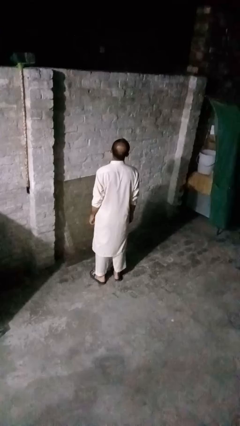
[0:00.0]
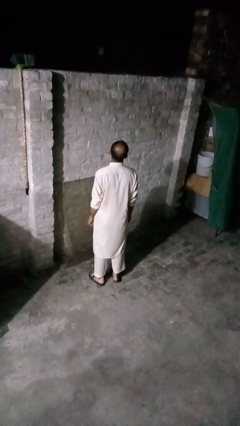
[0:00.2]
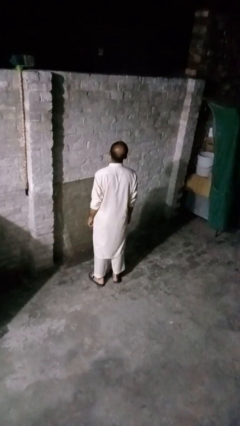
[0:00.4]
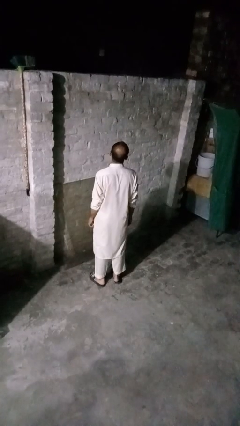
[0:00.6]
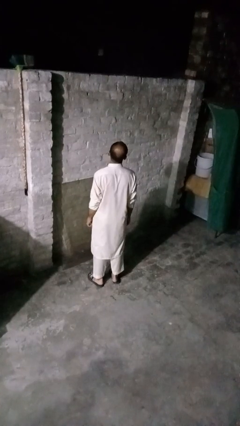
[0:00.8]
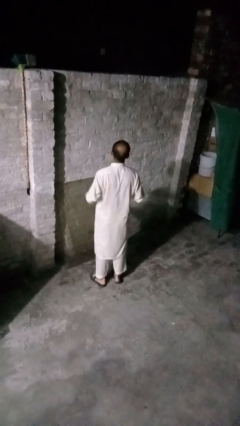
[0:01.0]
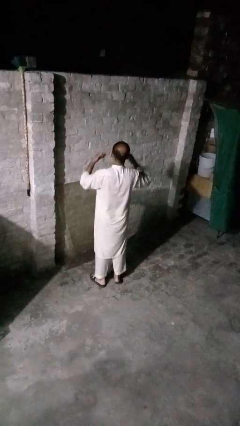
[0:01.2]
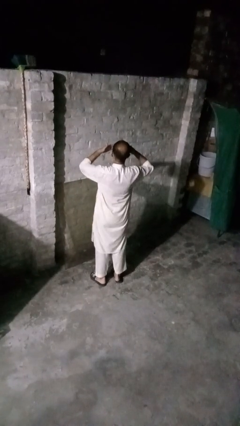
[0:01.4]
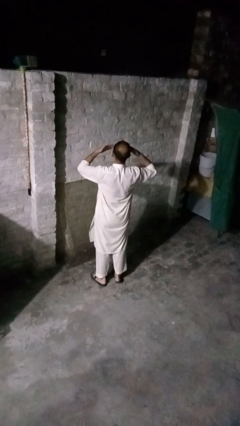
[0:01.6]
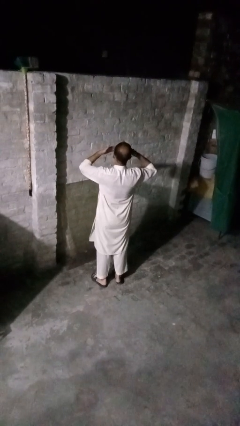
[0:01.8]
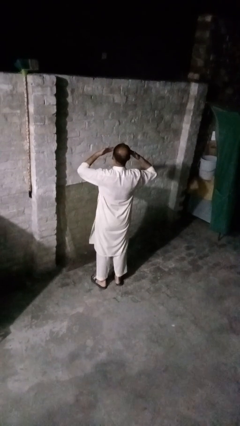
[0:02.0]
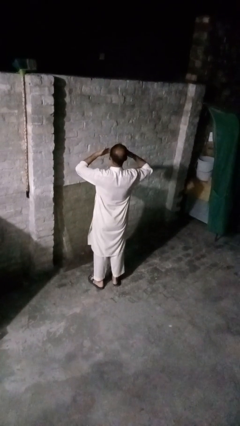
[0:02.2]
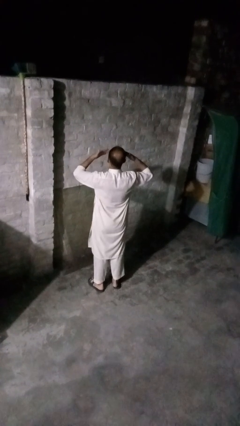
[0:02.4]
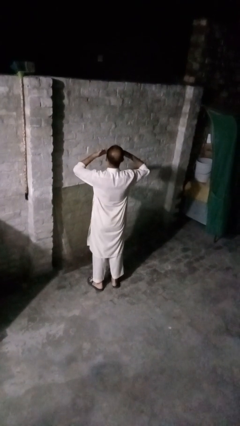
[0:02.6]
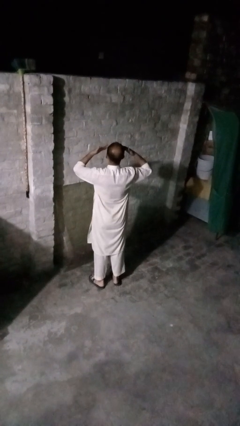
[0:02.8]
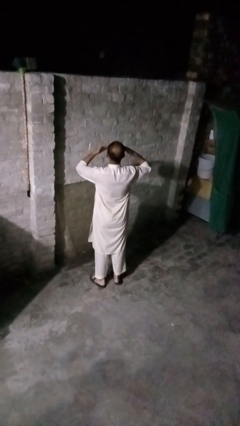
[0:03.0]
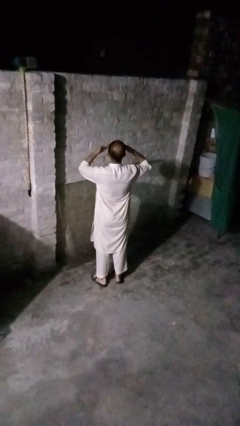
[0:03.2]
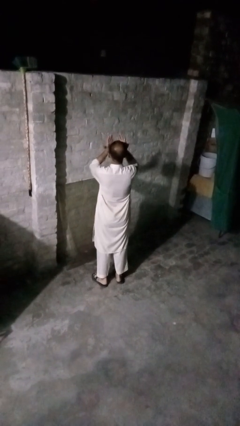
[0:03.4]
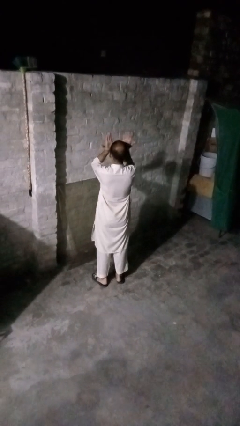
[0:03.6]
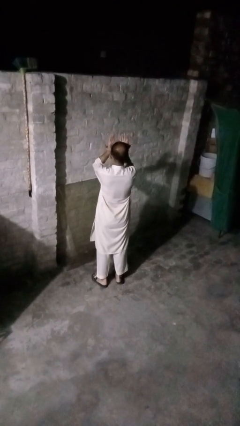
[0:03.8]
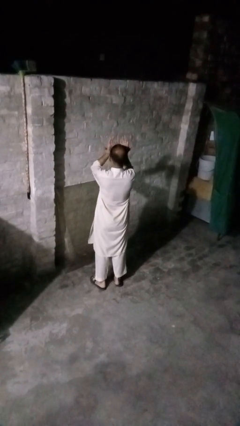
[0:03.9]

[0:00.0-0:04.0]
person rubs eyes

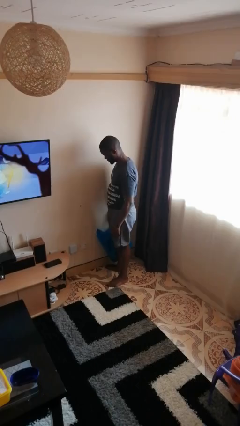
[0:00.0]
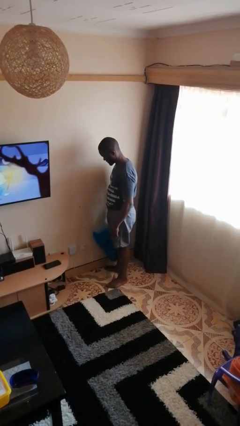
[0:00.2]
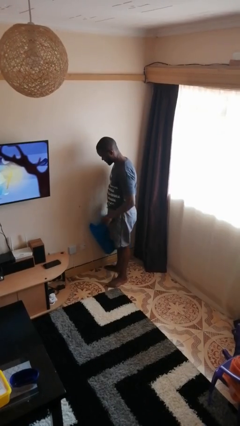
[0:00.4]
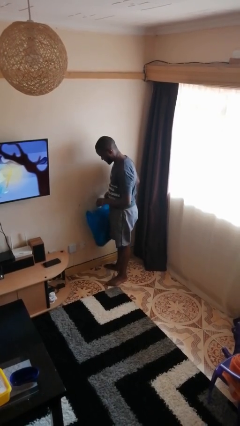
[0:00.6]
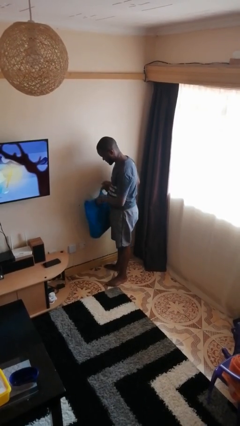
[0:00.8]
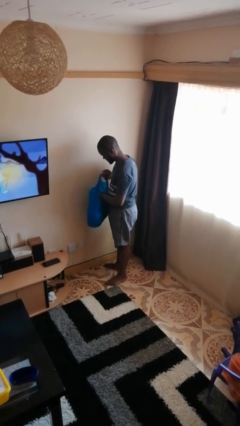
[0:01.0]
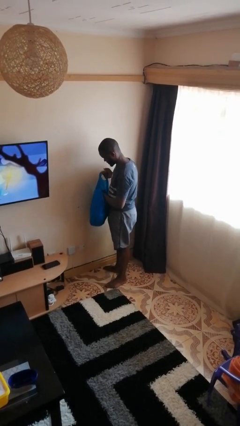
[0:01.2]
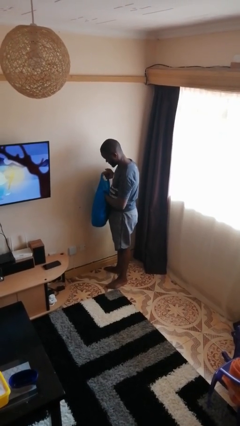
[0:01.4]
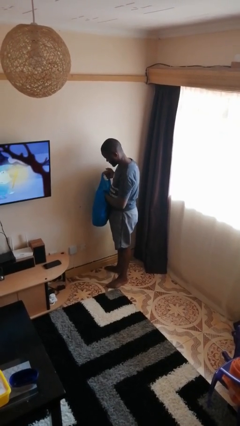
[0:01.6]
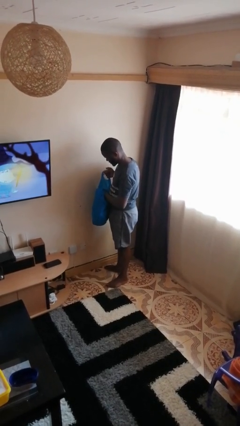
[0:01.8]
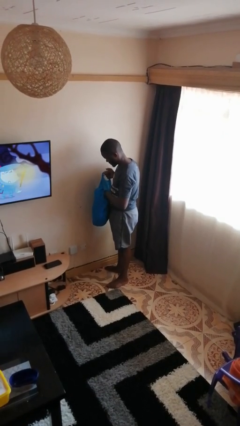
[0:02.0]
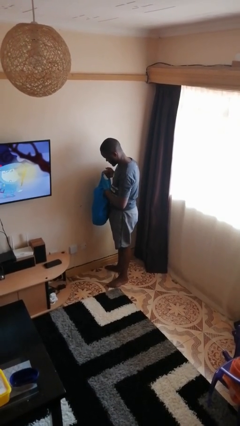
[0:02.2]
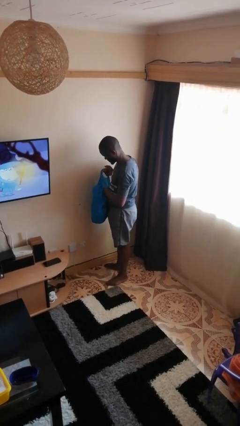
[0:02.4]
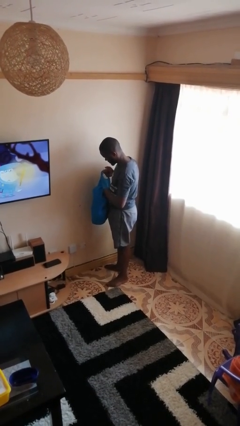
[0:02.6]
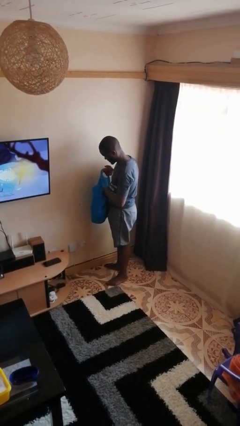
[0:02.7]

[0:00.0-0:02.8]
person searches in bag

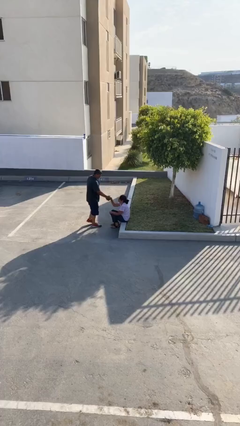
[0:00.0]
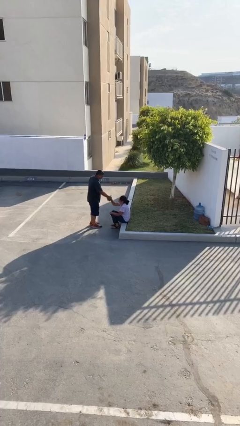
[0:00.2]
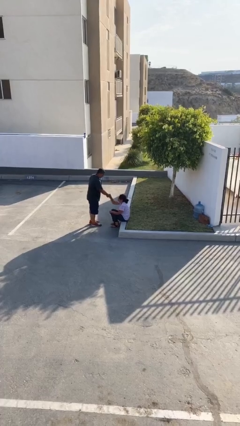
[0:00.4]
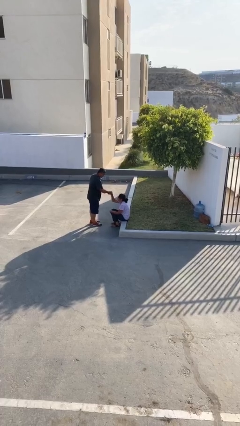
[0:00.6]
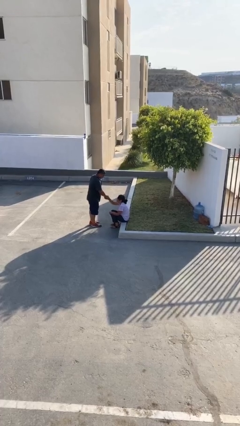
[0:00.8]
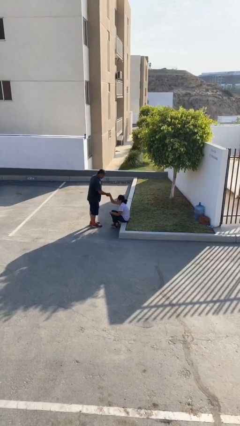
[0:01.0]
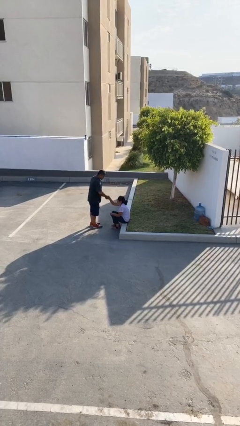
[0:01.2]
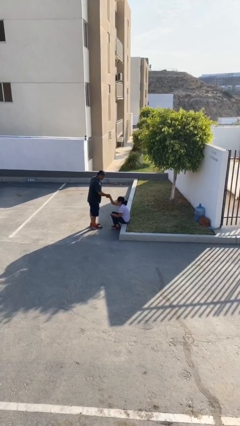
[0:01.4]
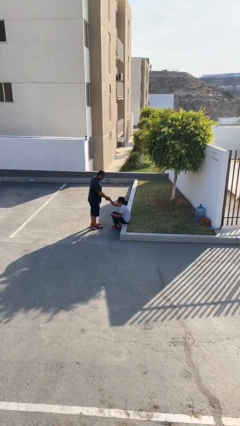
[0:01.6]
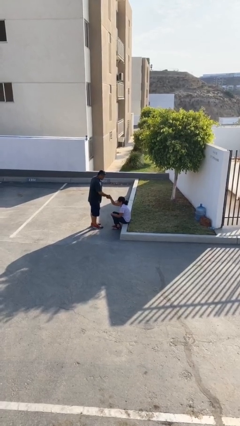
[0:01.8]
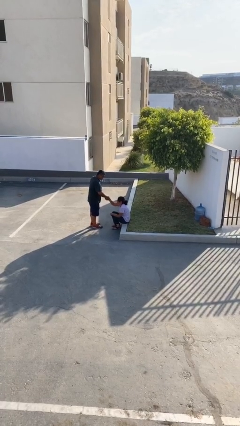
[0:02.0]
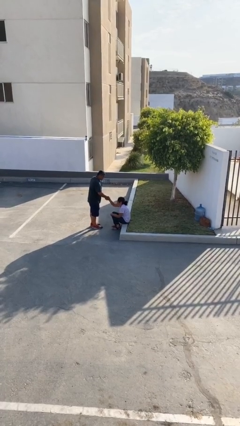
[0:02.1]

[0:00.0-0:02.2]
person shakes hand

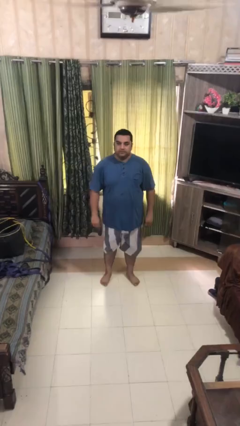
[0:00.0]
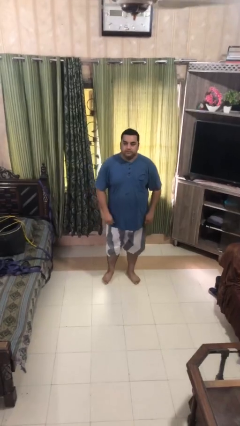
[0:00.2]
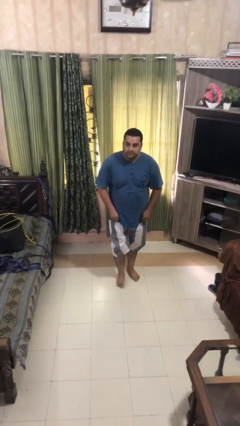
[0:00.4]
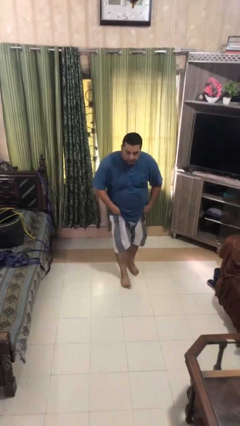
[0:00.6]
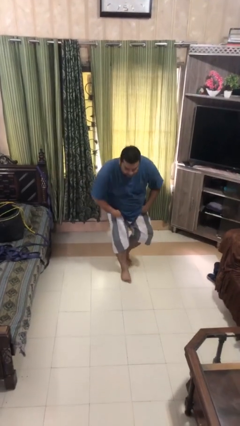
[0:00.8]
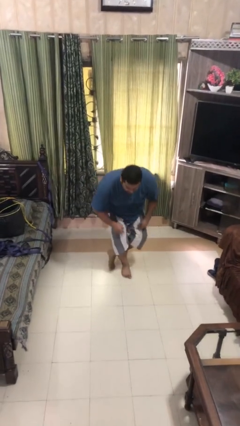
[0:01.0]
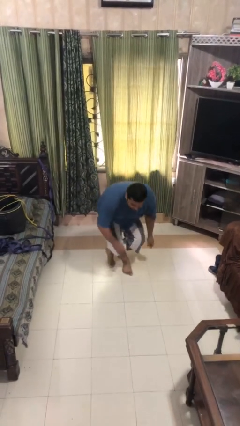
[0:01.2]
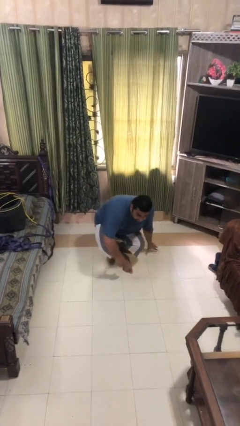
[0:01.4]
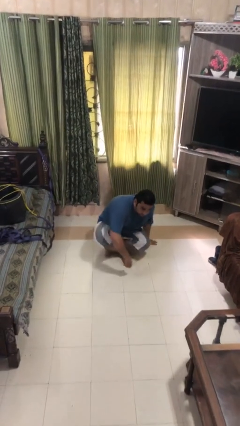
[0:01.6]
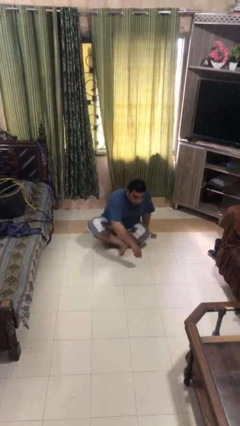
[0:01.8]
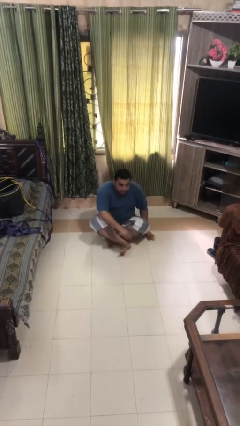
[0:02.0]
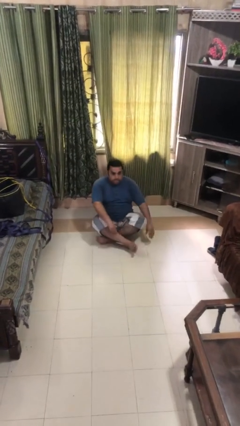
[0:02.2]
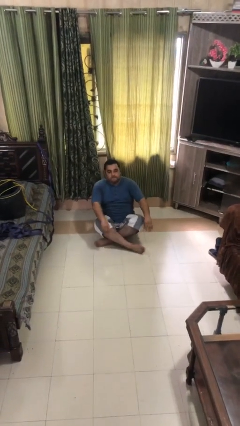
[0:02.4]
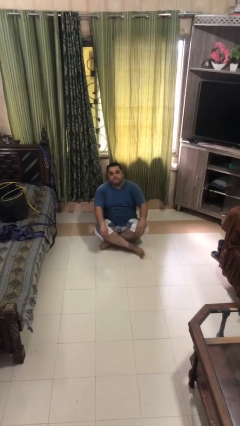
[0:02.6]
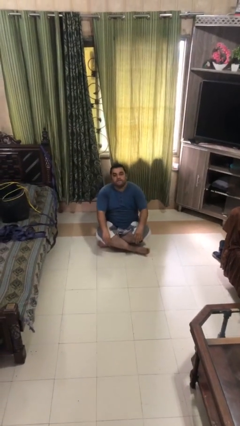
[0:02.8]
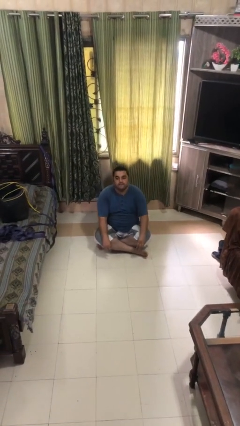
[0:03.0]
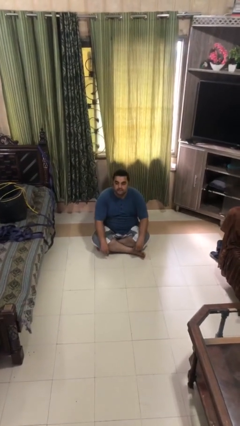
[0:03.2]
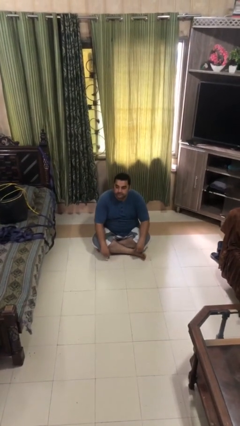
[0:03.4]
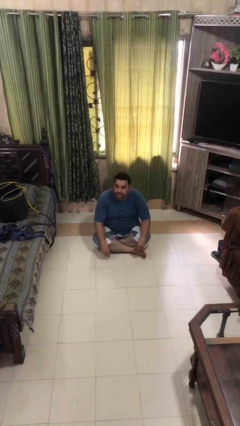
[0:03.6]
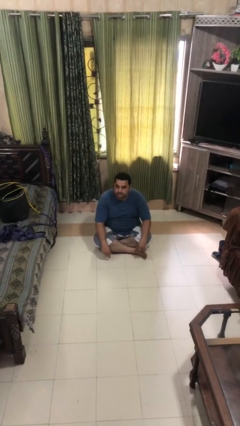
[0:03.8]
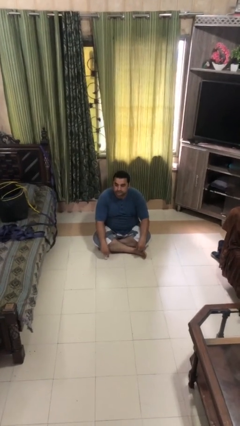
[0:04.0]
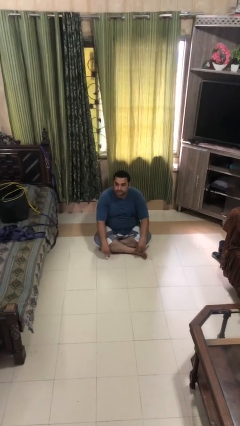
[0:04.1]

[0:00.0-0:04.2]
person sits crisscross

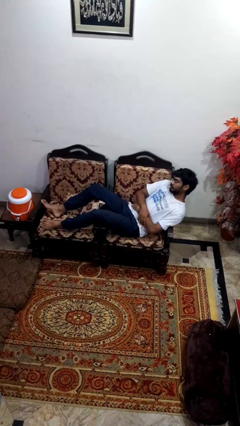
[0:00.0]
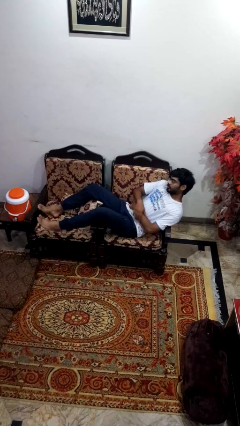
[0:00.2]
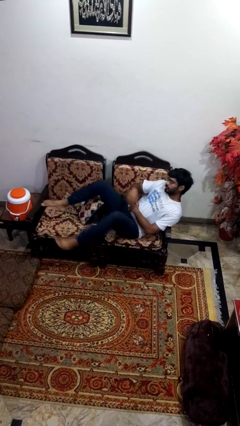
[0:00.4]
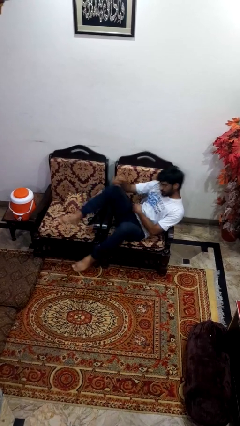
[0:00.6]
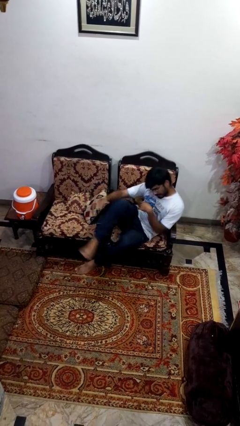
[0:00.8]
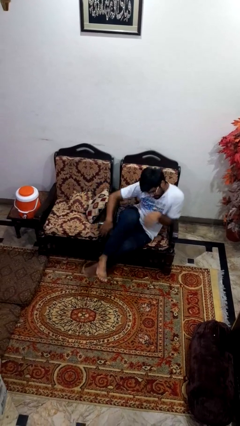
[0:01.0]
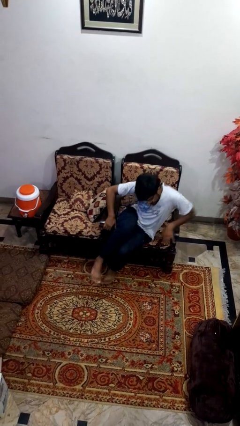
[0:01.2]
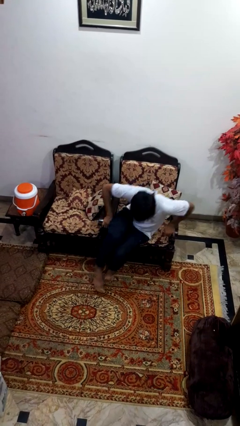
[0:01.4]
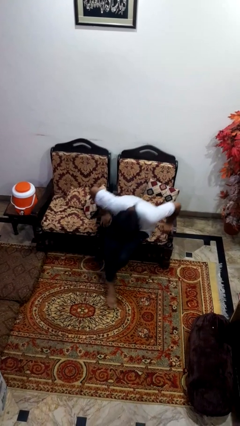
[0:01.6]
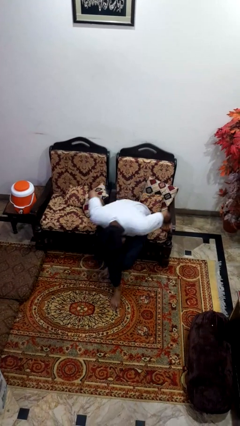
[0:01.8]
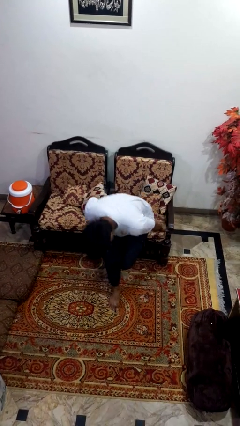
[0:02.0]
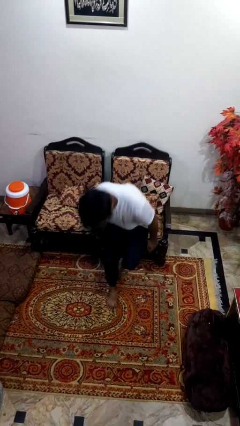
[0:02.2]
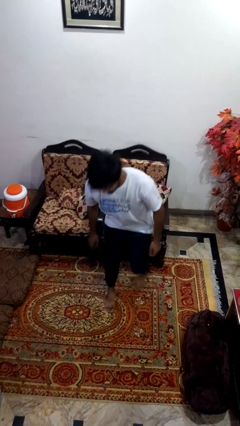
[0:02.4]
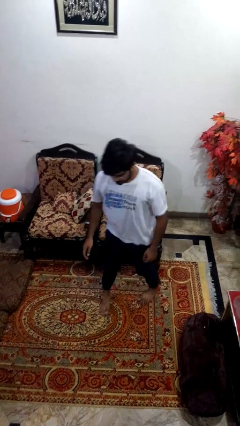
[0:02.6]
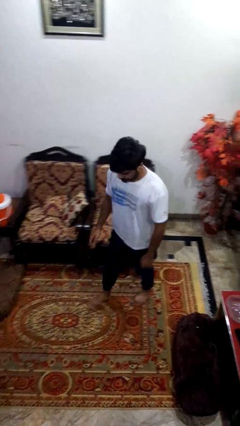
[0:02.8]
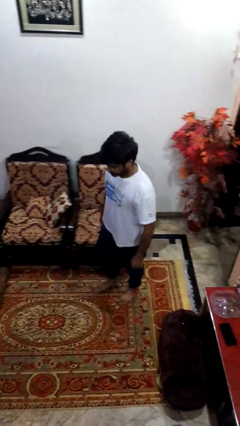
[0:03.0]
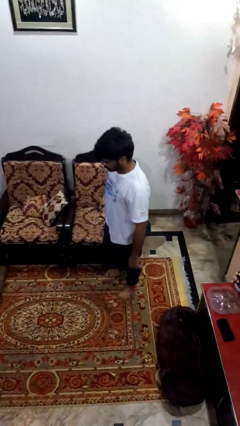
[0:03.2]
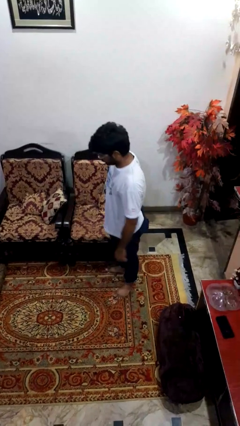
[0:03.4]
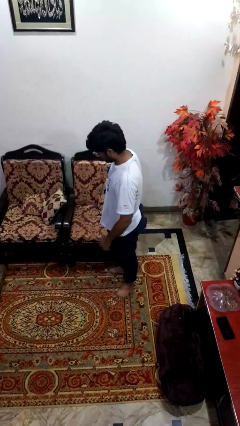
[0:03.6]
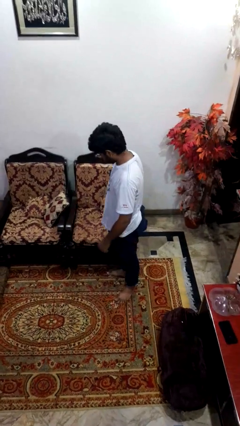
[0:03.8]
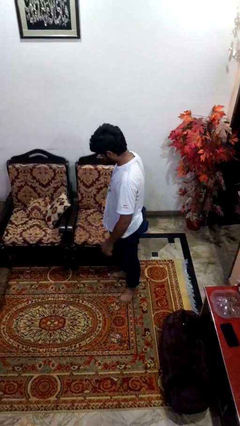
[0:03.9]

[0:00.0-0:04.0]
person stands up

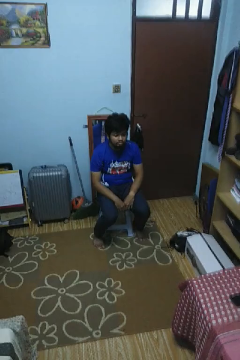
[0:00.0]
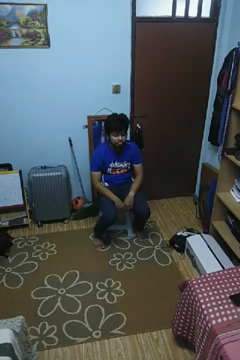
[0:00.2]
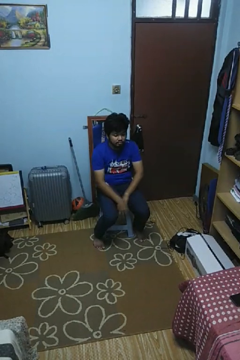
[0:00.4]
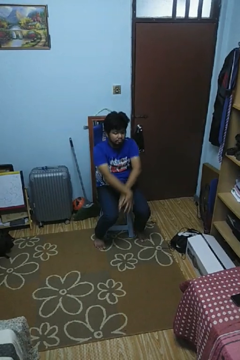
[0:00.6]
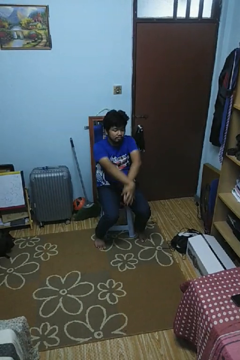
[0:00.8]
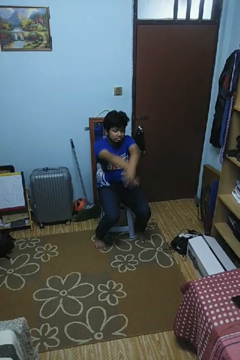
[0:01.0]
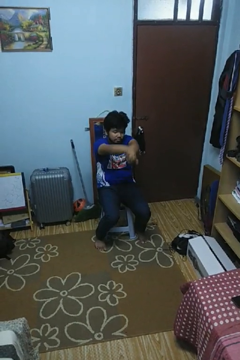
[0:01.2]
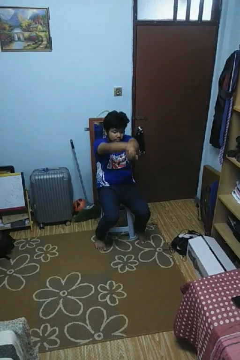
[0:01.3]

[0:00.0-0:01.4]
person crosses arms
